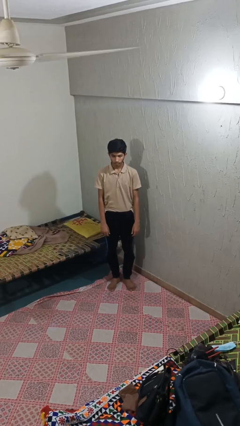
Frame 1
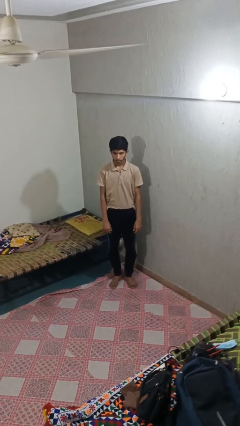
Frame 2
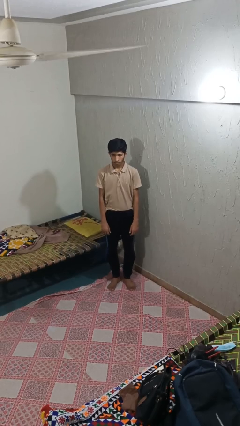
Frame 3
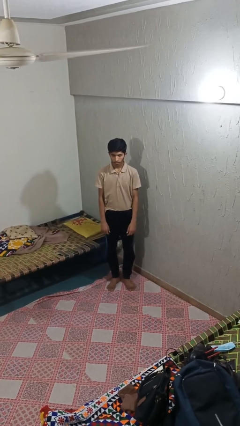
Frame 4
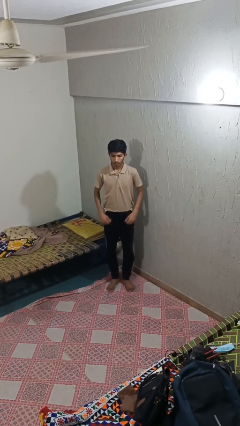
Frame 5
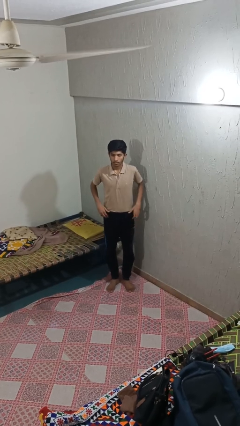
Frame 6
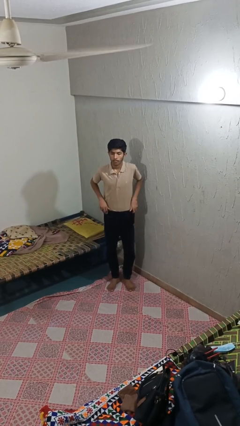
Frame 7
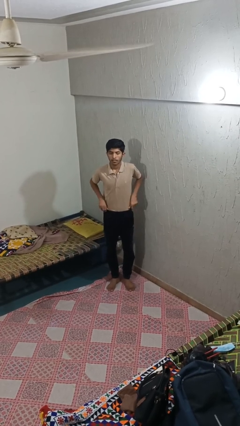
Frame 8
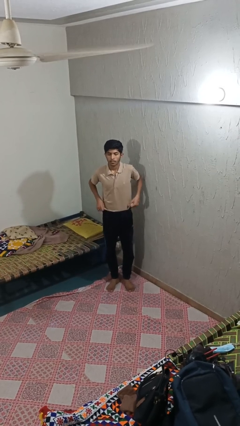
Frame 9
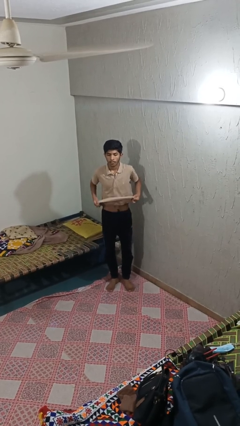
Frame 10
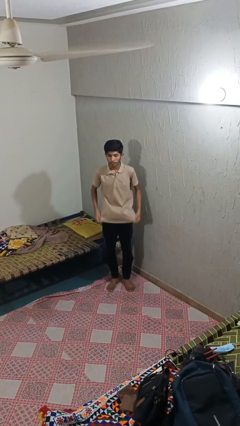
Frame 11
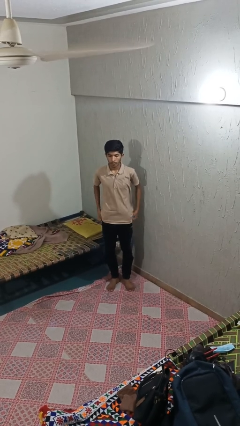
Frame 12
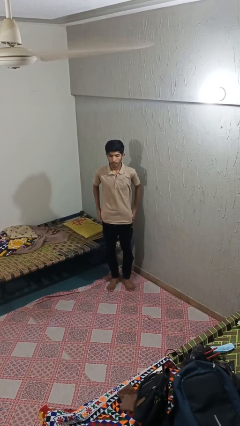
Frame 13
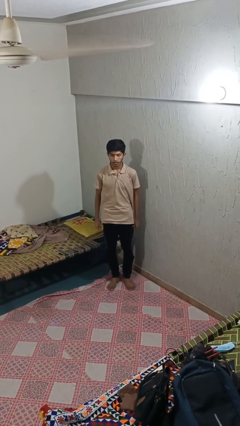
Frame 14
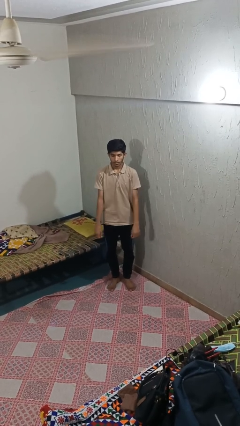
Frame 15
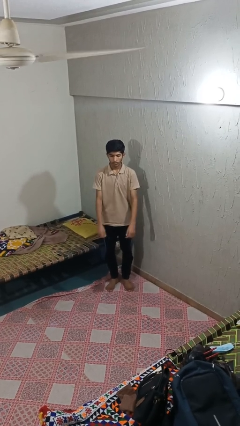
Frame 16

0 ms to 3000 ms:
person untucks shirt

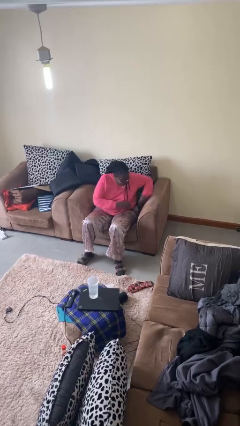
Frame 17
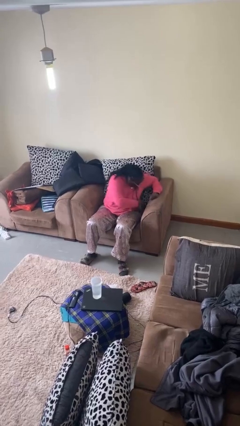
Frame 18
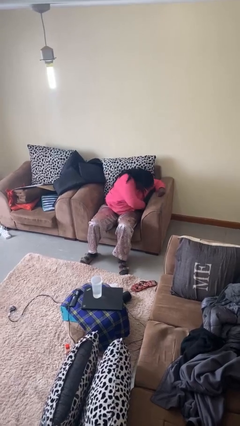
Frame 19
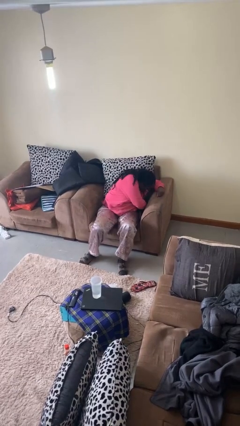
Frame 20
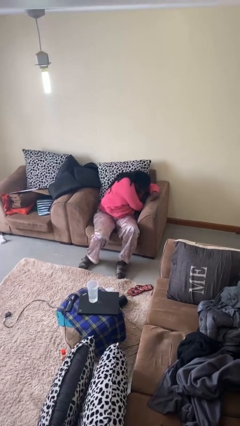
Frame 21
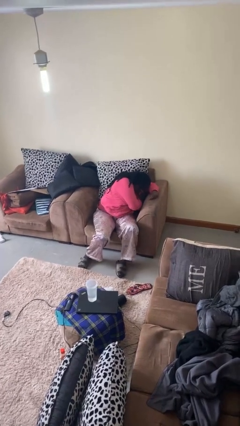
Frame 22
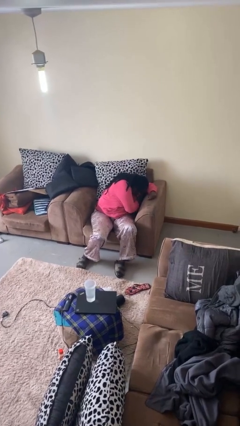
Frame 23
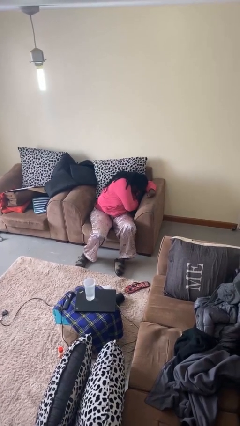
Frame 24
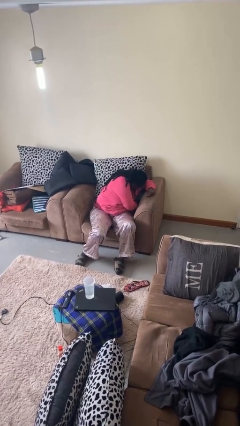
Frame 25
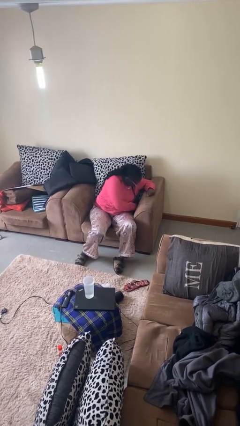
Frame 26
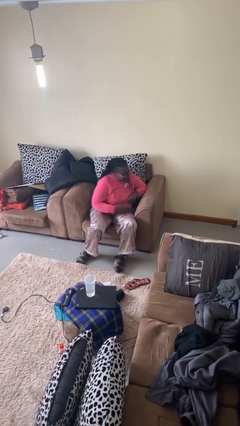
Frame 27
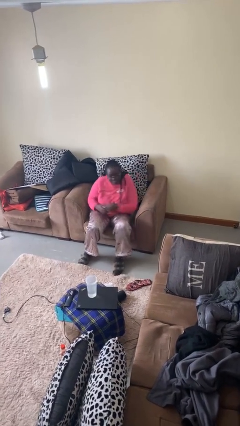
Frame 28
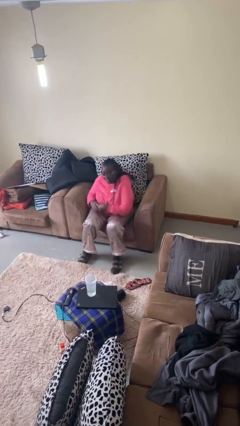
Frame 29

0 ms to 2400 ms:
person searches in couch

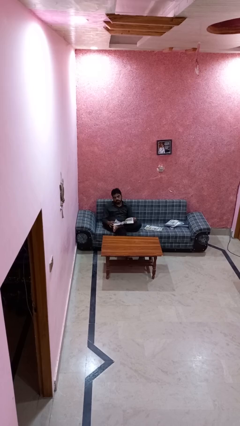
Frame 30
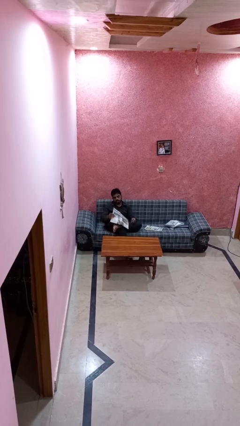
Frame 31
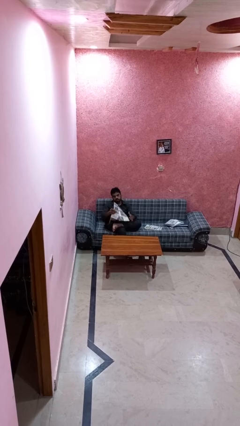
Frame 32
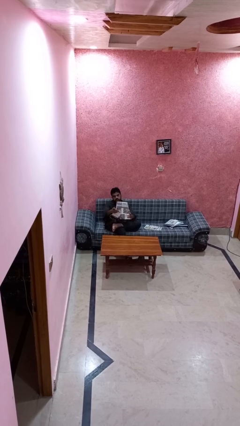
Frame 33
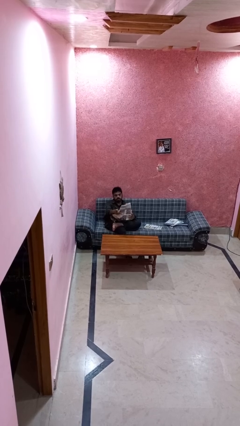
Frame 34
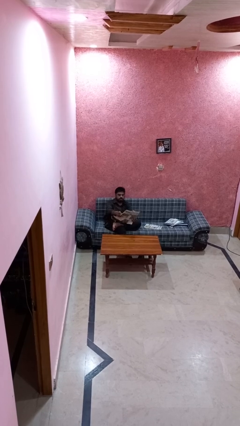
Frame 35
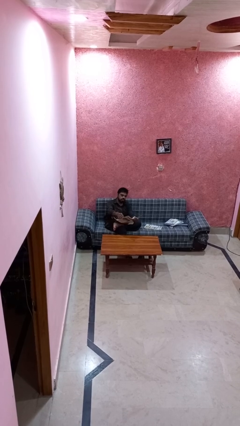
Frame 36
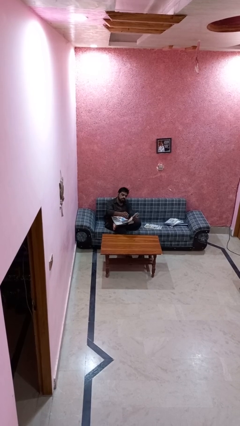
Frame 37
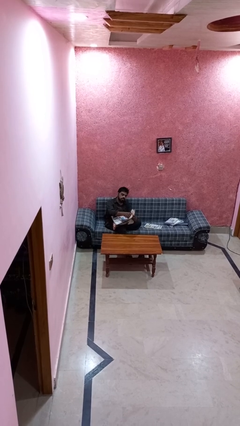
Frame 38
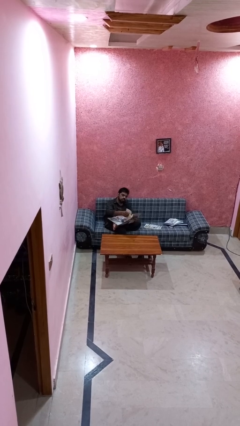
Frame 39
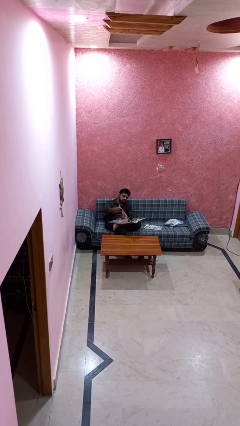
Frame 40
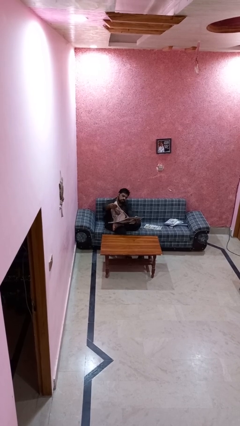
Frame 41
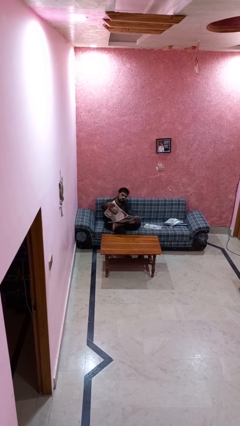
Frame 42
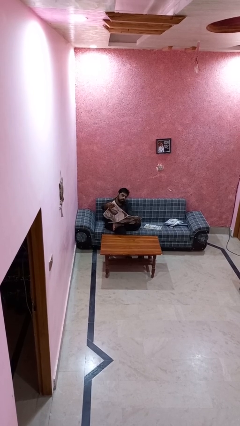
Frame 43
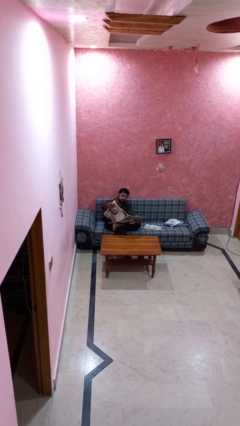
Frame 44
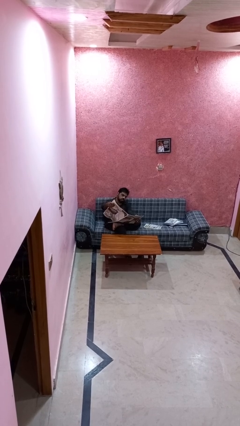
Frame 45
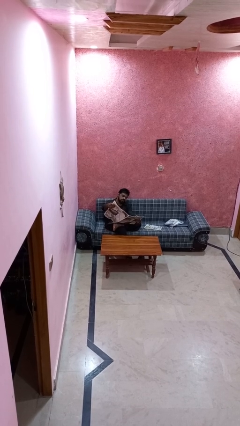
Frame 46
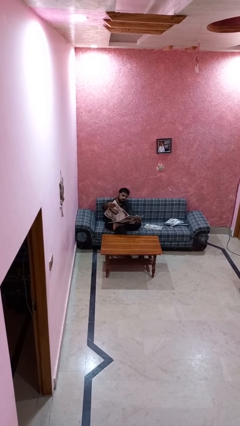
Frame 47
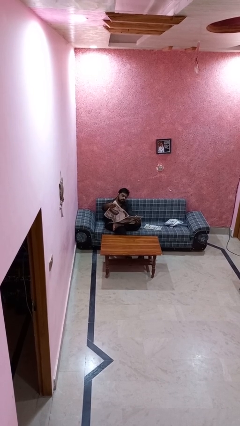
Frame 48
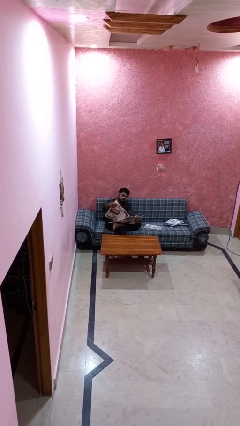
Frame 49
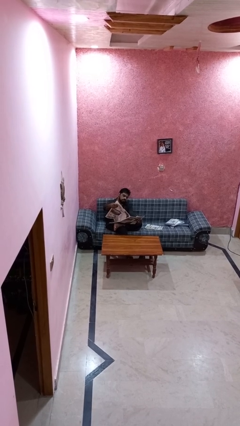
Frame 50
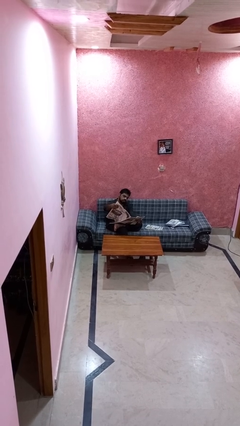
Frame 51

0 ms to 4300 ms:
person reads newspaper

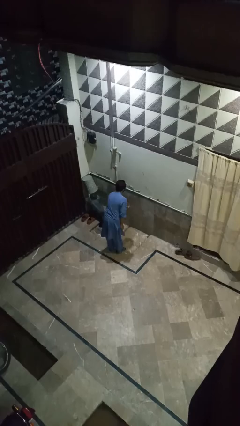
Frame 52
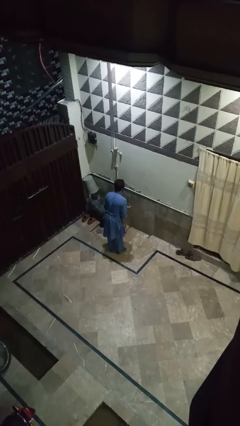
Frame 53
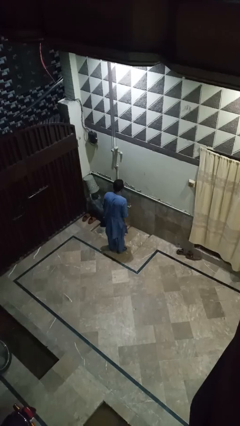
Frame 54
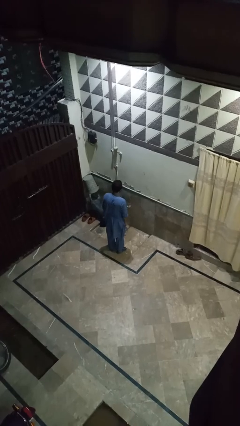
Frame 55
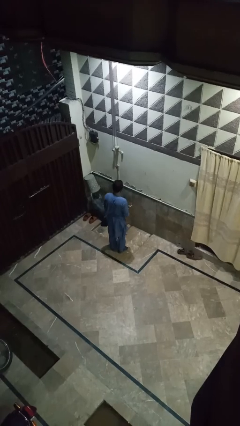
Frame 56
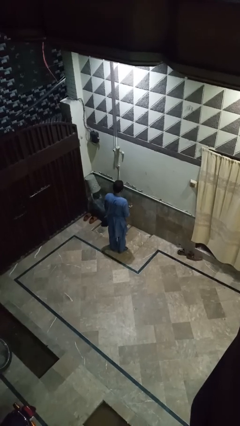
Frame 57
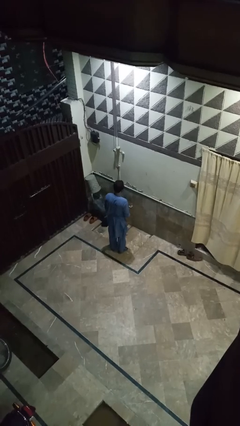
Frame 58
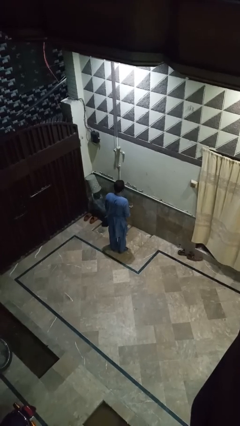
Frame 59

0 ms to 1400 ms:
person turns off faucet

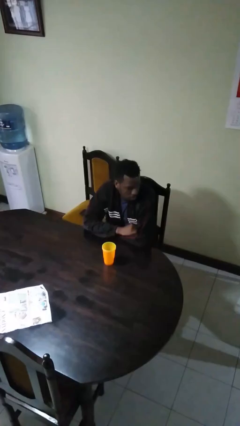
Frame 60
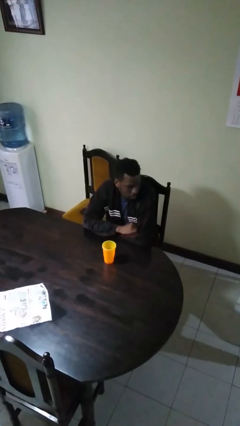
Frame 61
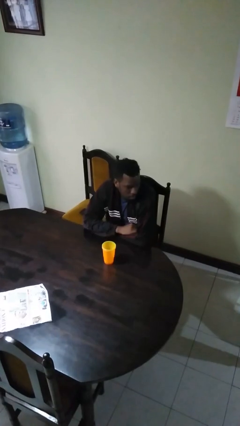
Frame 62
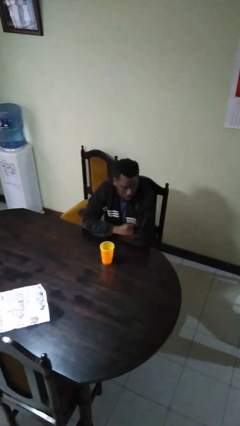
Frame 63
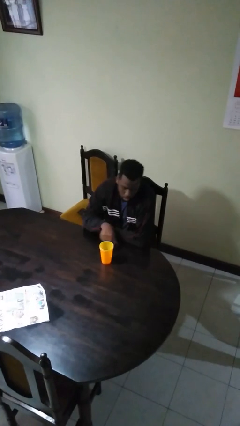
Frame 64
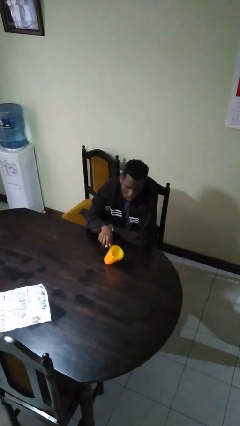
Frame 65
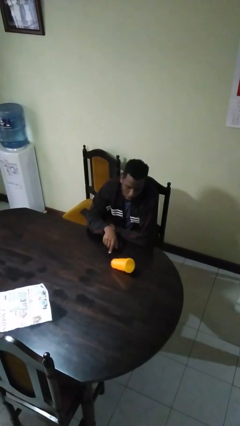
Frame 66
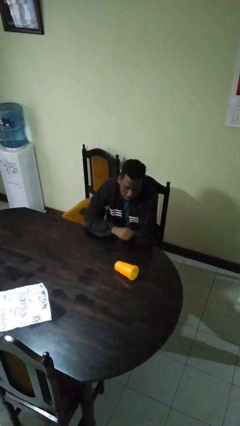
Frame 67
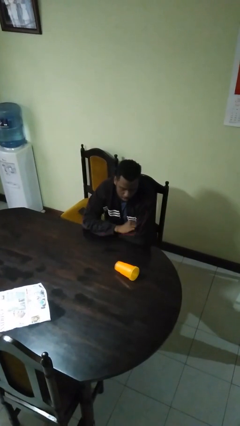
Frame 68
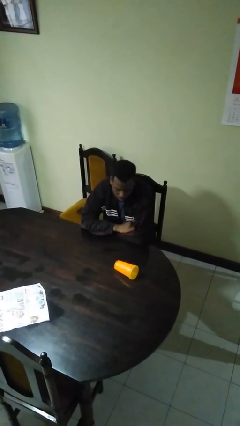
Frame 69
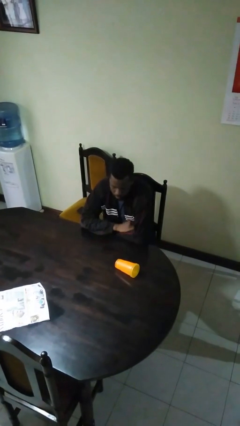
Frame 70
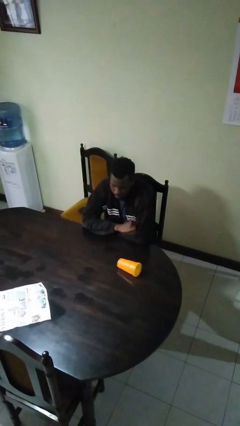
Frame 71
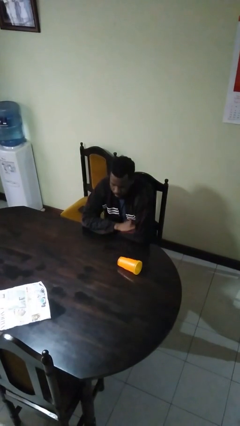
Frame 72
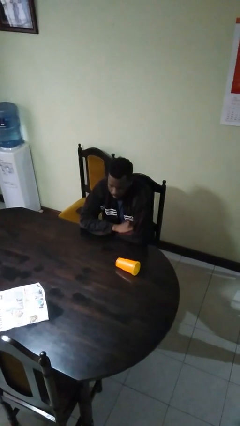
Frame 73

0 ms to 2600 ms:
person knocks over glass

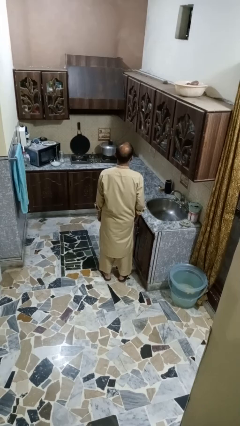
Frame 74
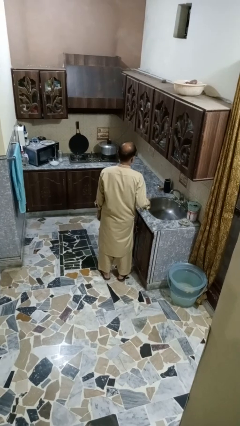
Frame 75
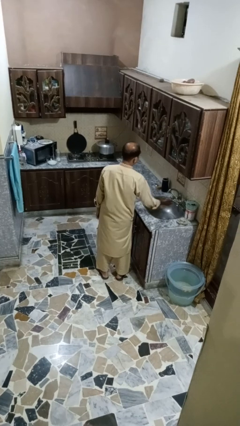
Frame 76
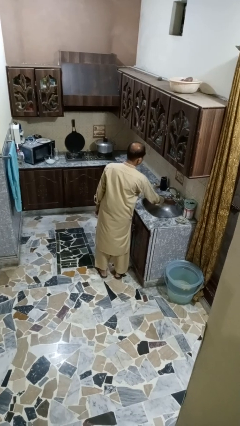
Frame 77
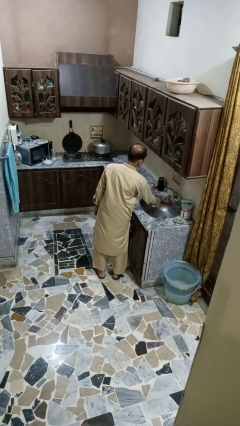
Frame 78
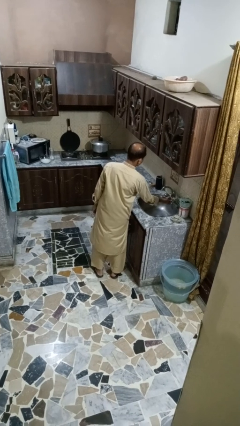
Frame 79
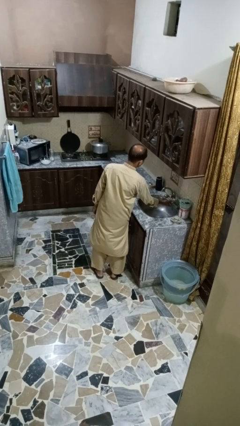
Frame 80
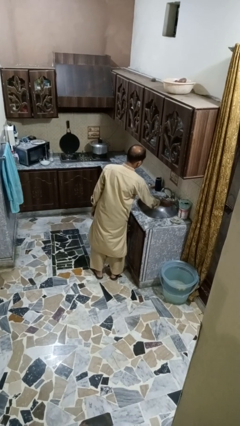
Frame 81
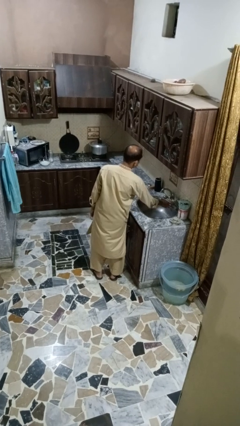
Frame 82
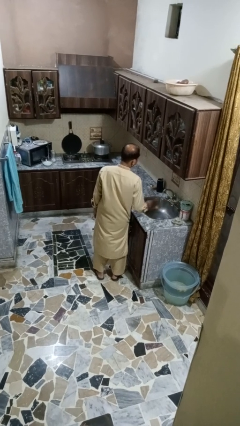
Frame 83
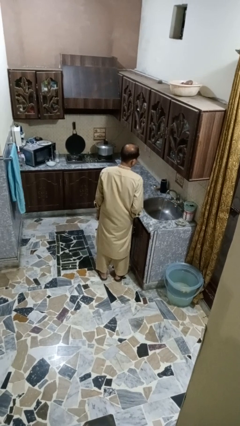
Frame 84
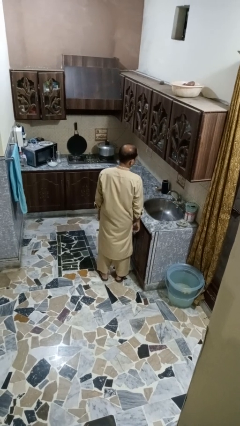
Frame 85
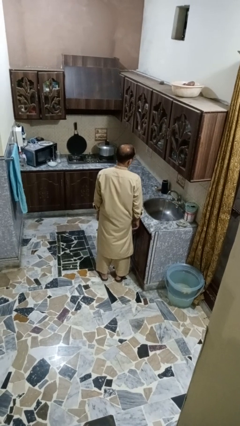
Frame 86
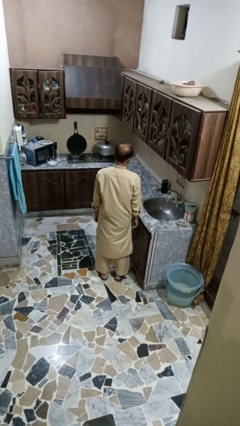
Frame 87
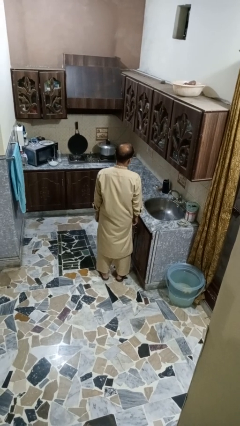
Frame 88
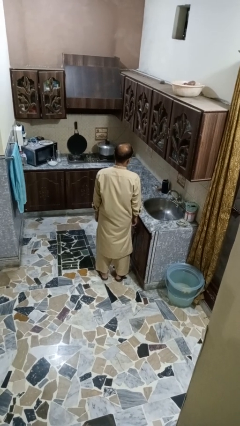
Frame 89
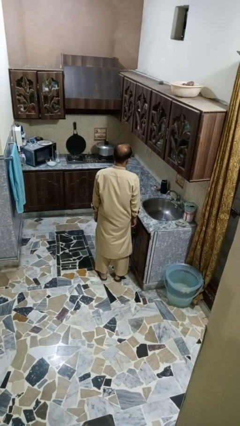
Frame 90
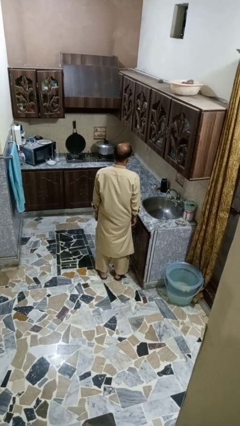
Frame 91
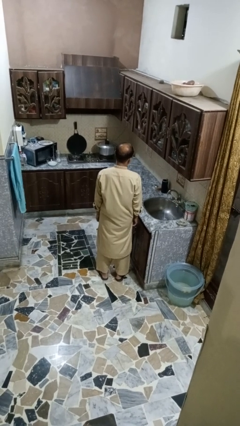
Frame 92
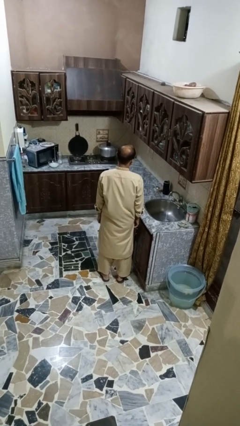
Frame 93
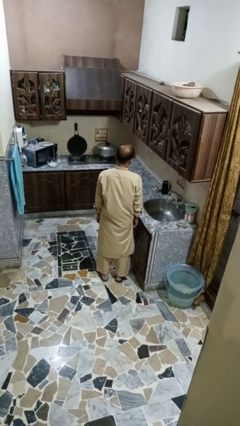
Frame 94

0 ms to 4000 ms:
person turns on faucet
